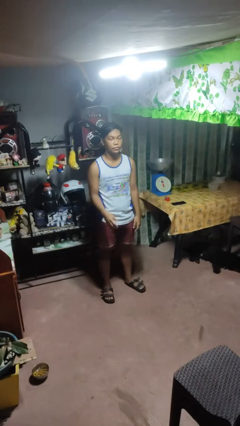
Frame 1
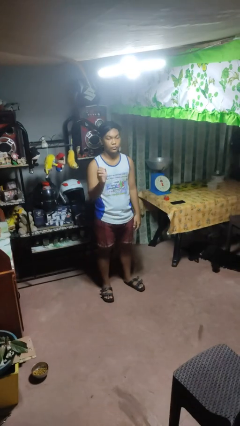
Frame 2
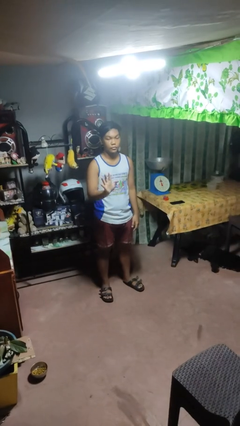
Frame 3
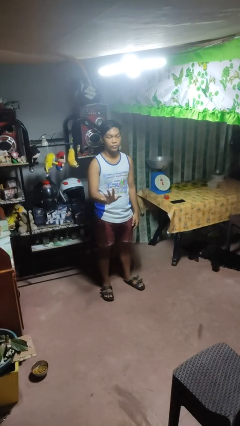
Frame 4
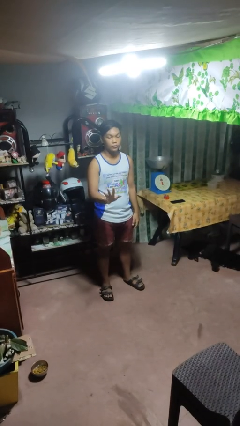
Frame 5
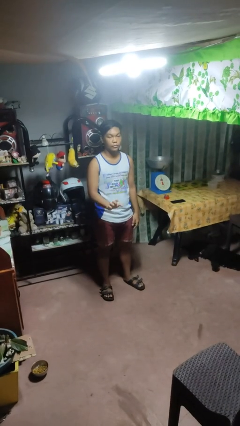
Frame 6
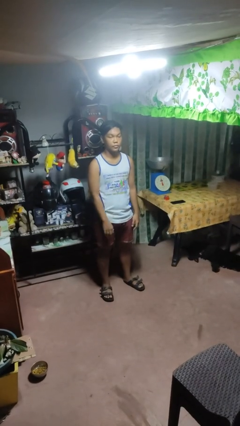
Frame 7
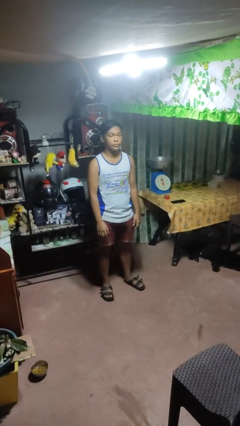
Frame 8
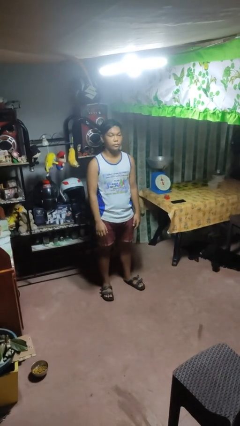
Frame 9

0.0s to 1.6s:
person gestures number five

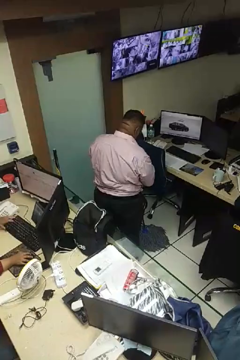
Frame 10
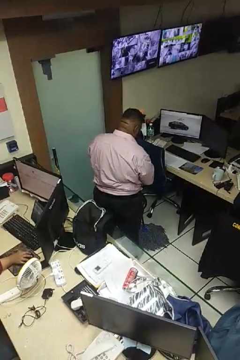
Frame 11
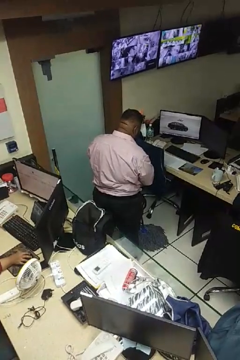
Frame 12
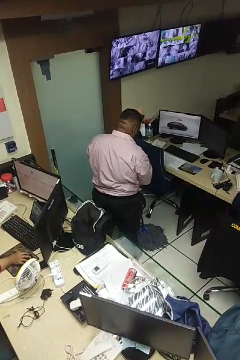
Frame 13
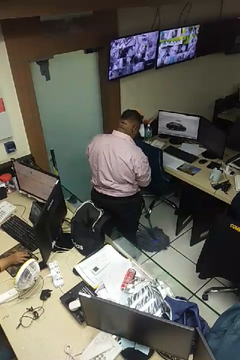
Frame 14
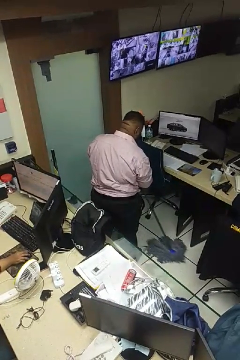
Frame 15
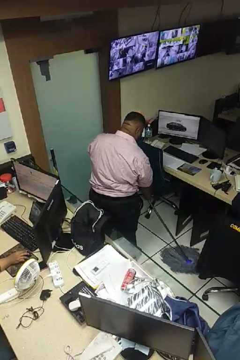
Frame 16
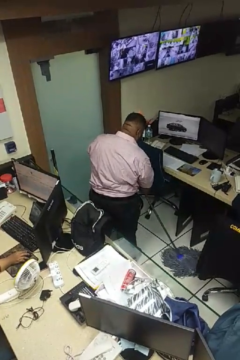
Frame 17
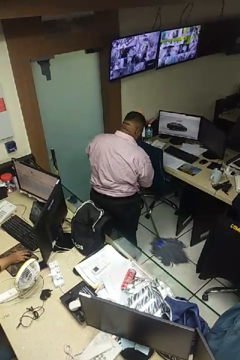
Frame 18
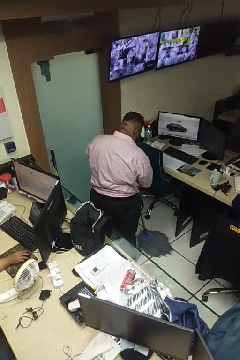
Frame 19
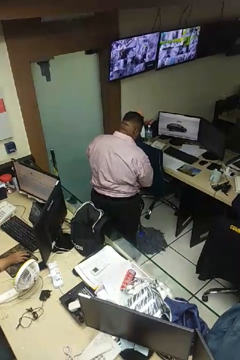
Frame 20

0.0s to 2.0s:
person mops

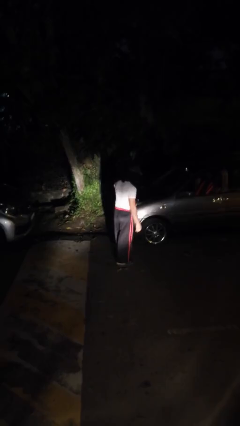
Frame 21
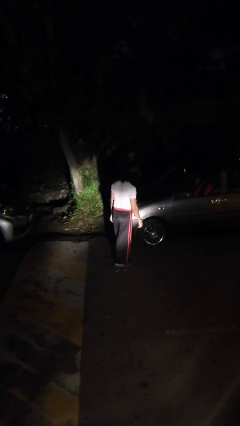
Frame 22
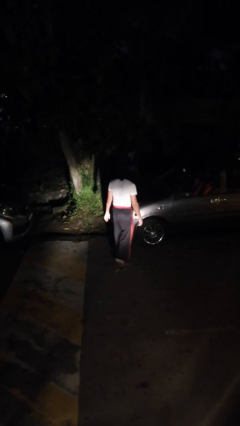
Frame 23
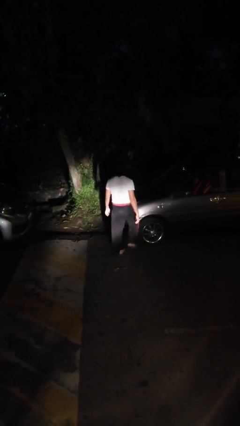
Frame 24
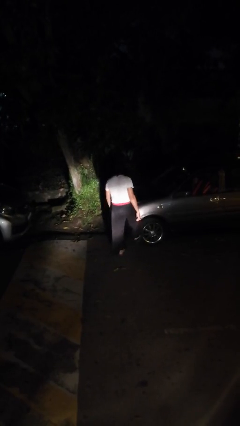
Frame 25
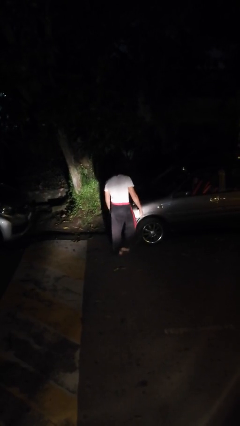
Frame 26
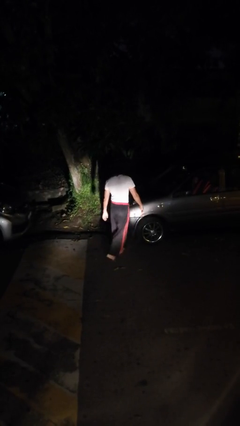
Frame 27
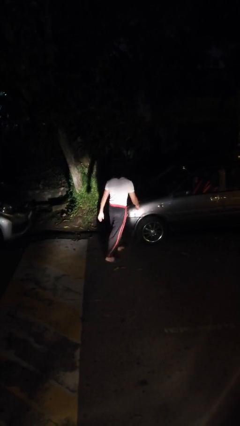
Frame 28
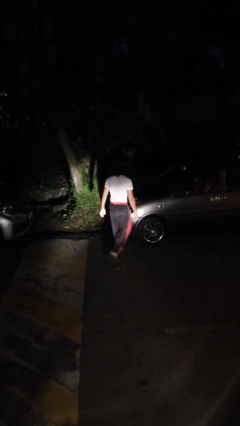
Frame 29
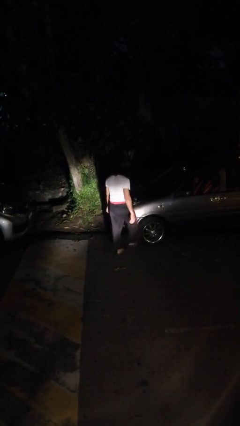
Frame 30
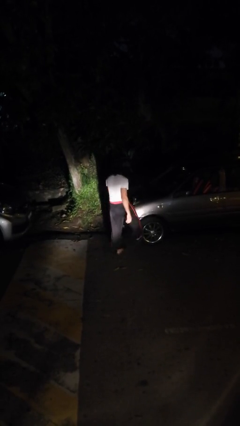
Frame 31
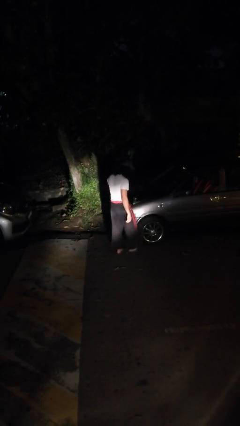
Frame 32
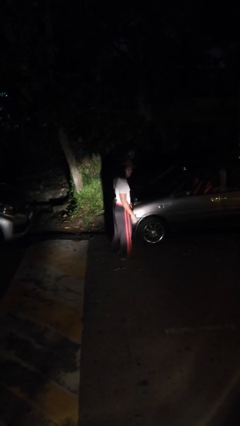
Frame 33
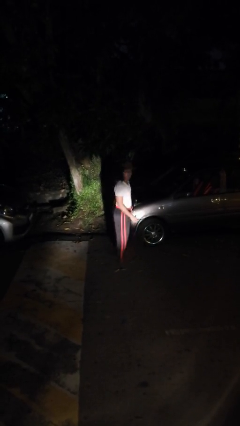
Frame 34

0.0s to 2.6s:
person kicks car tires

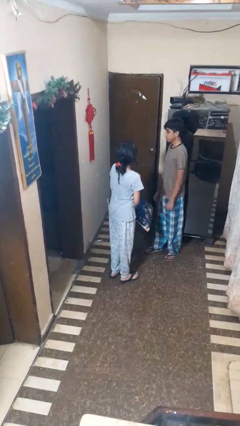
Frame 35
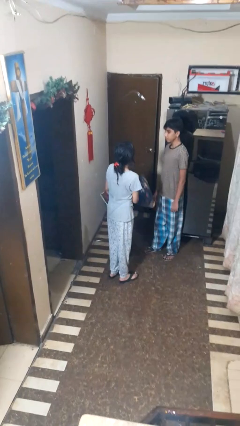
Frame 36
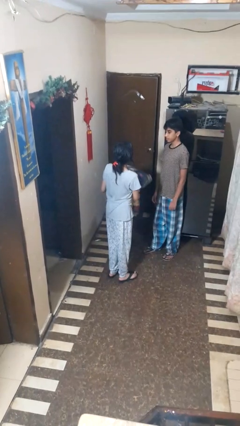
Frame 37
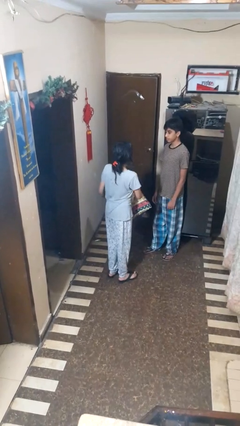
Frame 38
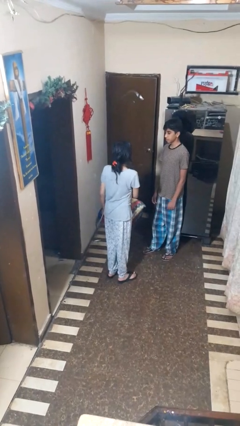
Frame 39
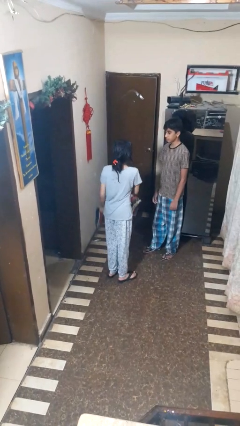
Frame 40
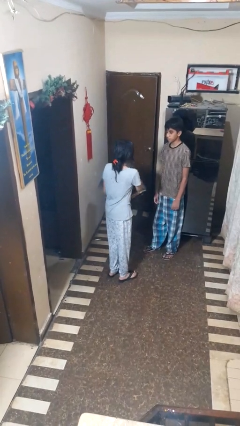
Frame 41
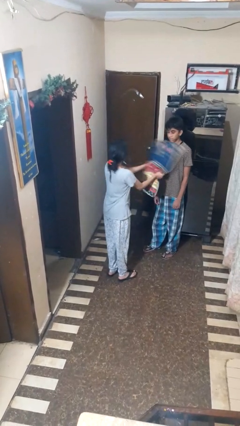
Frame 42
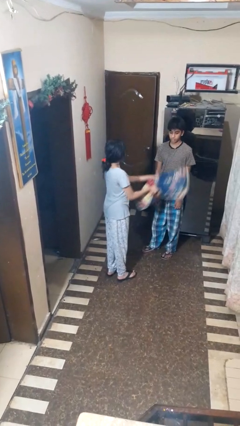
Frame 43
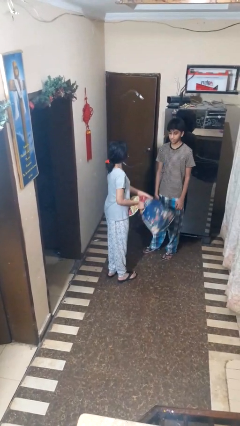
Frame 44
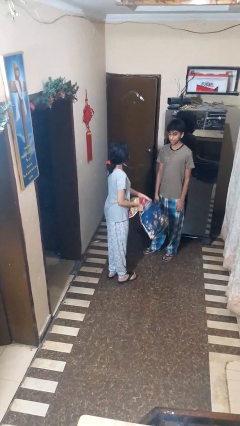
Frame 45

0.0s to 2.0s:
person hits person with pillow

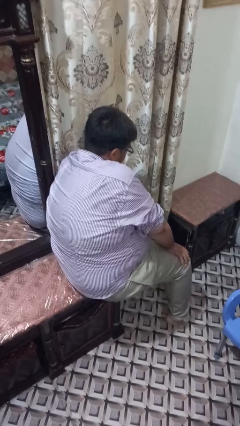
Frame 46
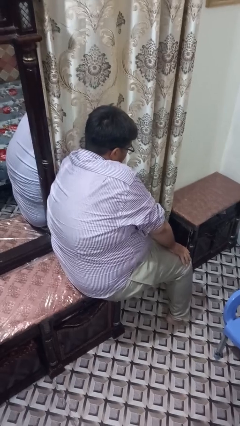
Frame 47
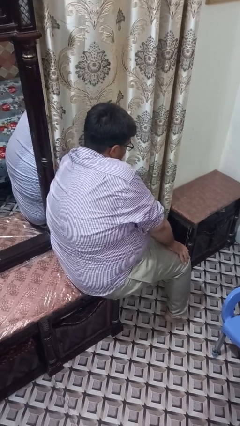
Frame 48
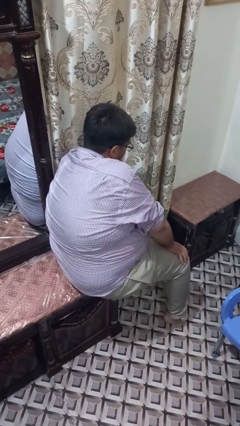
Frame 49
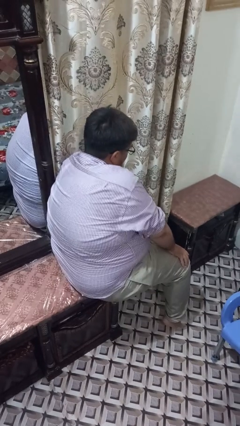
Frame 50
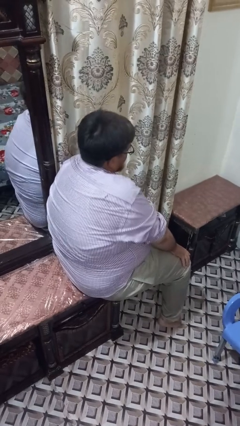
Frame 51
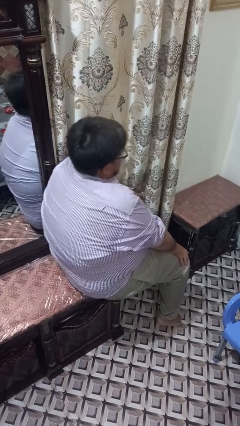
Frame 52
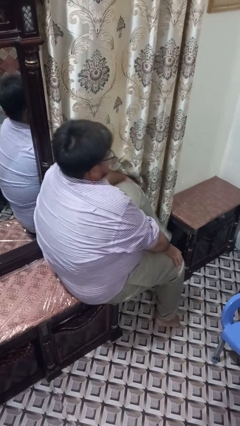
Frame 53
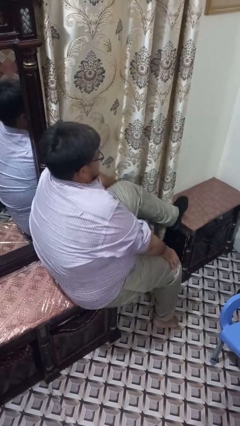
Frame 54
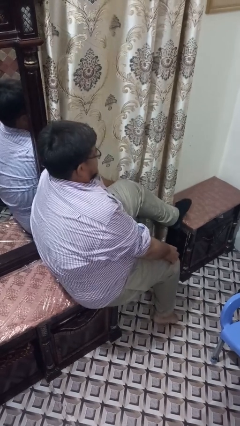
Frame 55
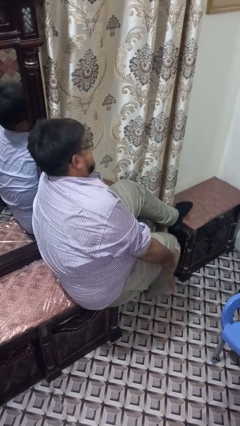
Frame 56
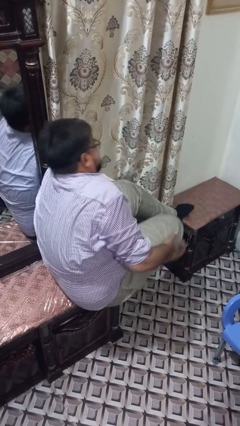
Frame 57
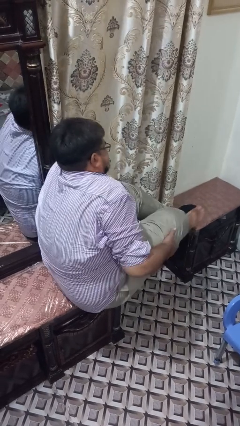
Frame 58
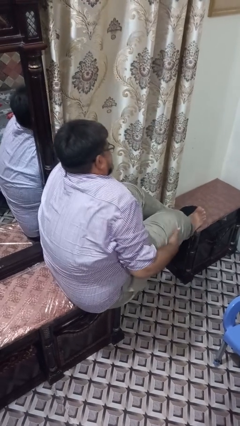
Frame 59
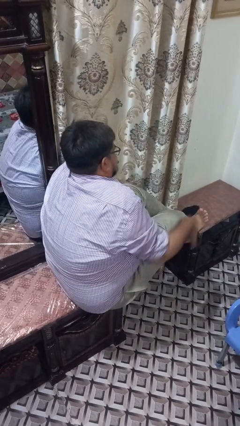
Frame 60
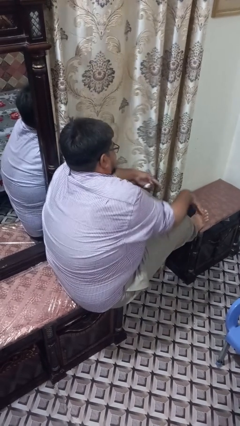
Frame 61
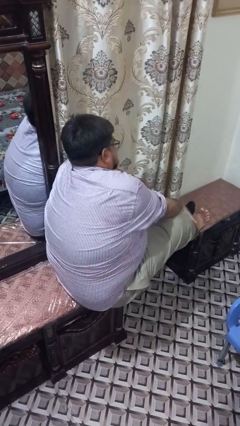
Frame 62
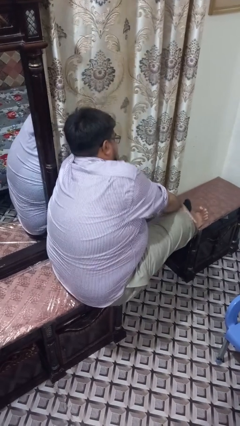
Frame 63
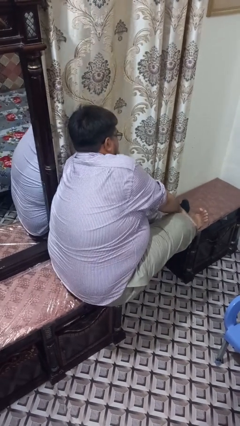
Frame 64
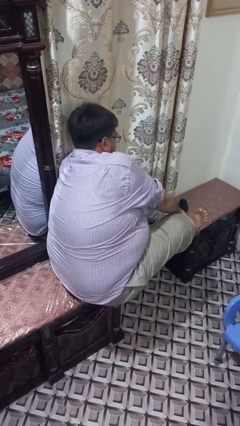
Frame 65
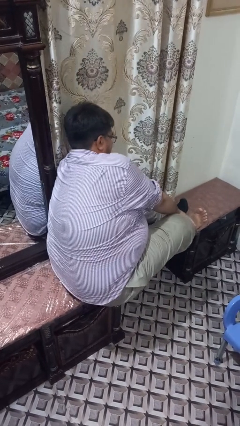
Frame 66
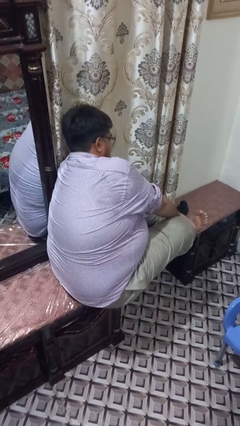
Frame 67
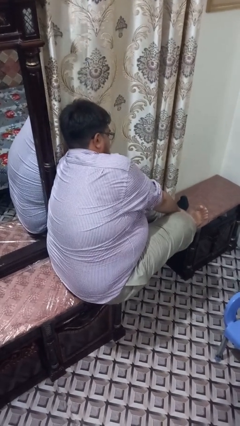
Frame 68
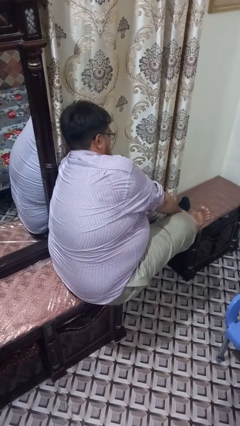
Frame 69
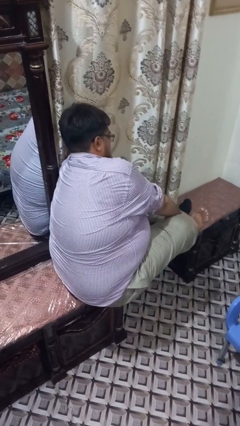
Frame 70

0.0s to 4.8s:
person puts feet up

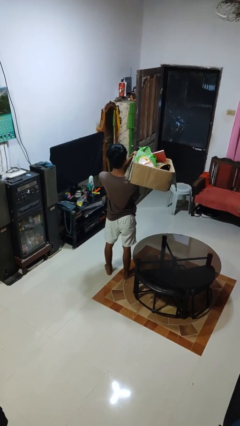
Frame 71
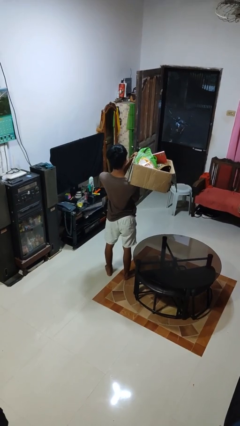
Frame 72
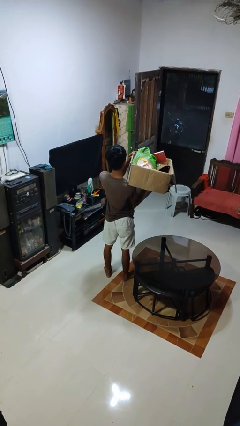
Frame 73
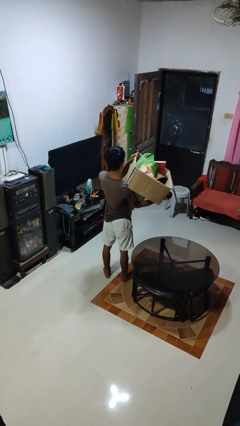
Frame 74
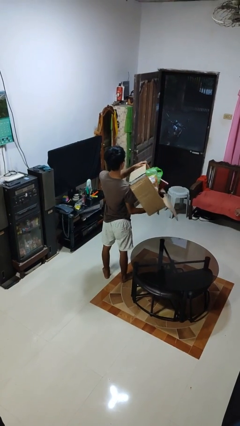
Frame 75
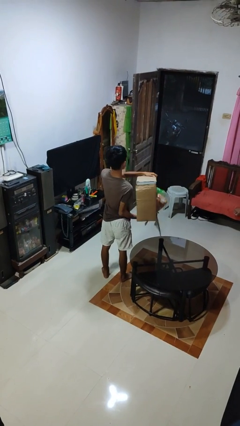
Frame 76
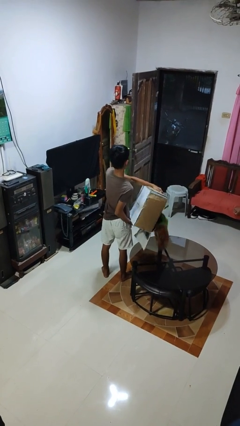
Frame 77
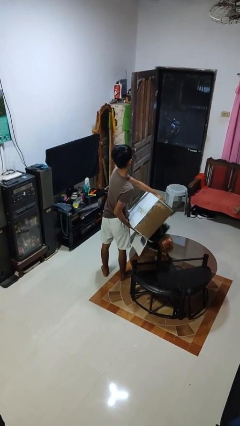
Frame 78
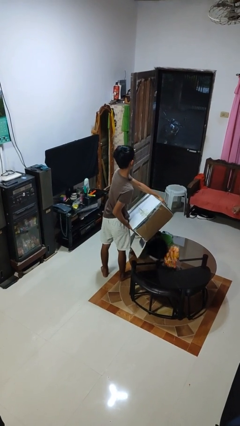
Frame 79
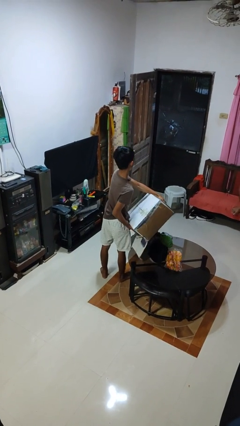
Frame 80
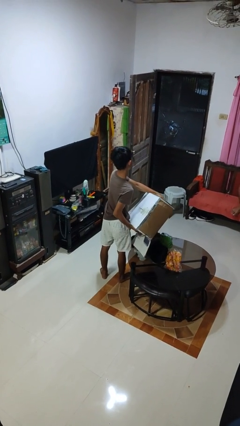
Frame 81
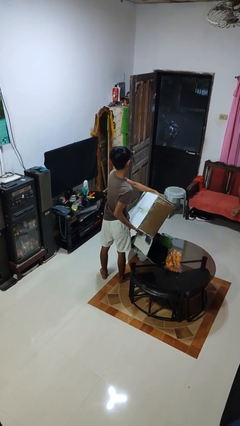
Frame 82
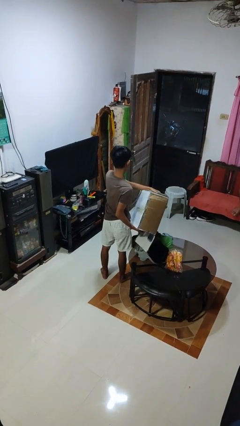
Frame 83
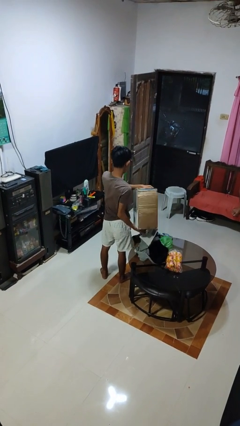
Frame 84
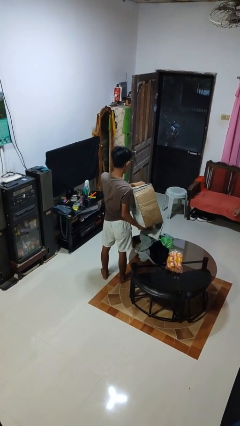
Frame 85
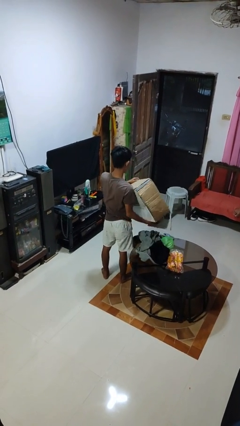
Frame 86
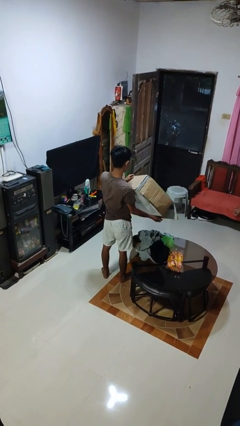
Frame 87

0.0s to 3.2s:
person unloads box onto table

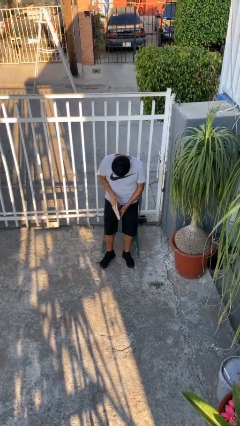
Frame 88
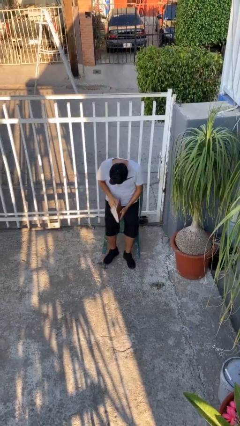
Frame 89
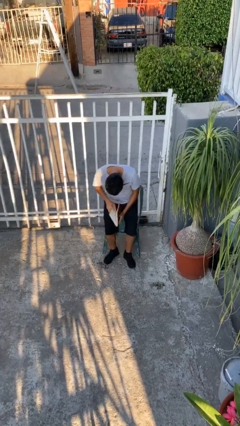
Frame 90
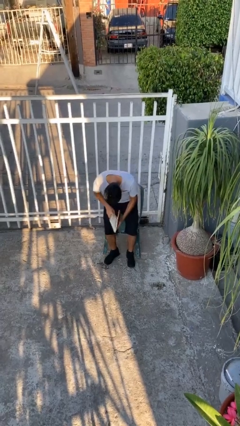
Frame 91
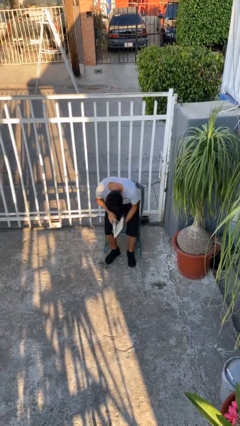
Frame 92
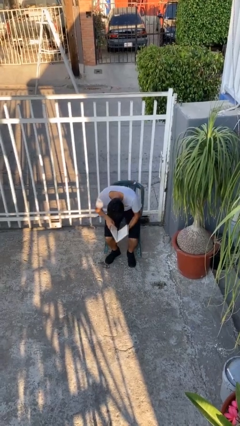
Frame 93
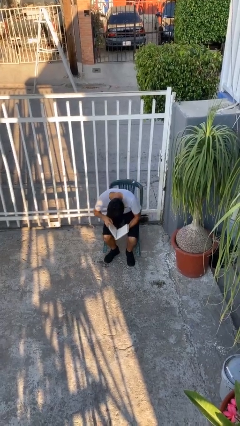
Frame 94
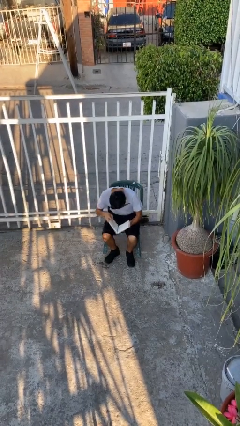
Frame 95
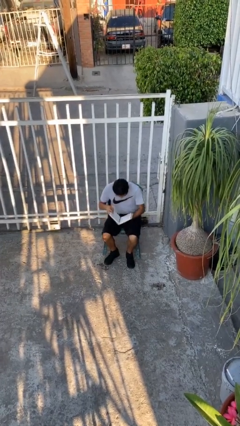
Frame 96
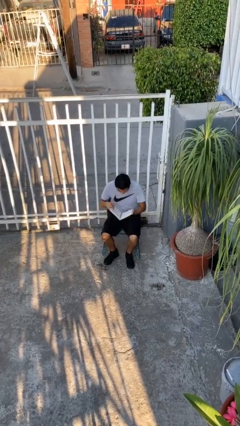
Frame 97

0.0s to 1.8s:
person sits down
